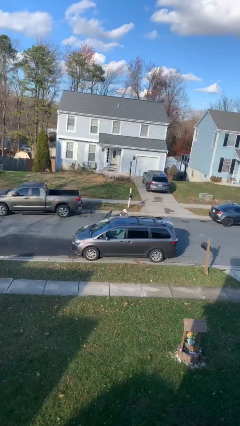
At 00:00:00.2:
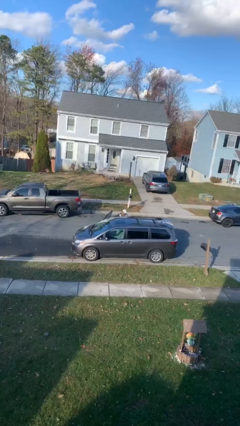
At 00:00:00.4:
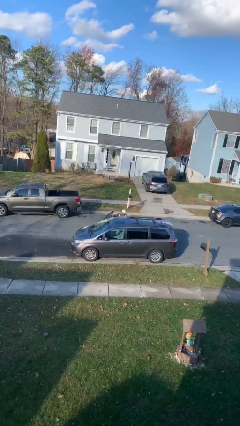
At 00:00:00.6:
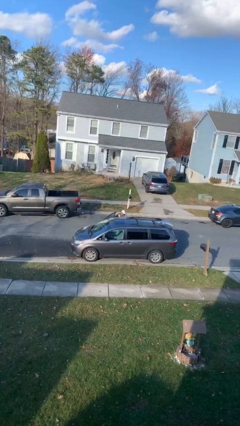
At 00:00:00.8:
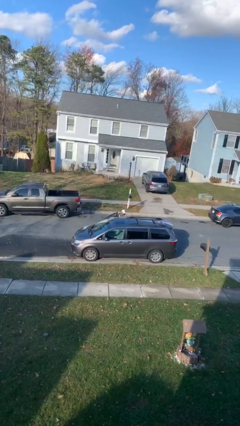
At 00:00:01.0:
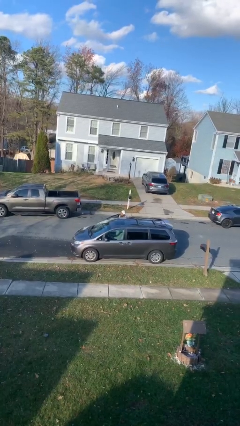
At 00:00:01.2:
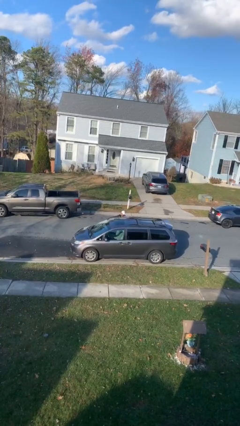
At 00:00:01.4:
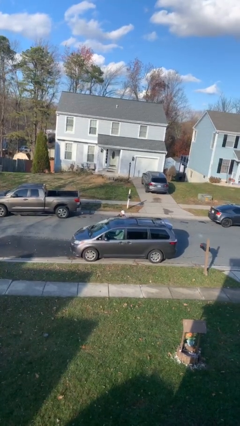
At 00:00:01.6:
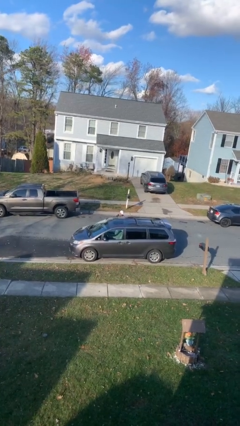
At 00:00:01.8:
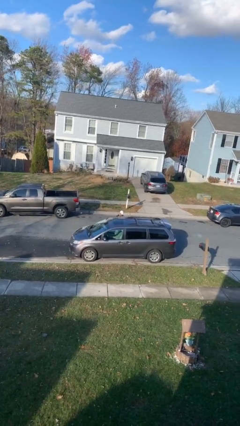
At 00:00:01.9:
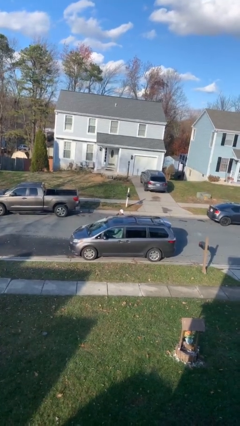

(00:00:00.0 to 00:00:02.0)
person closes car door

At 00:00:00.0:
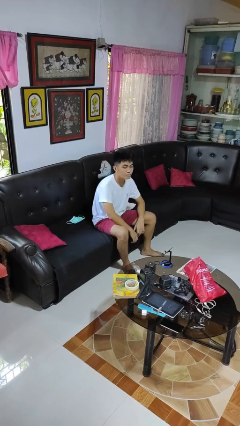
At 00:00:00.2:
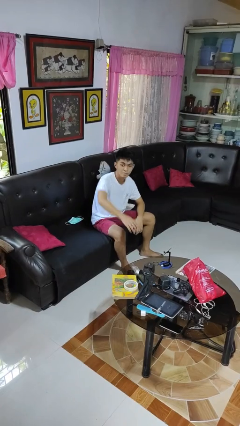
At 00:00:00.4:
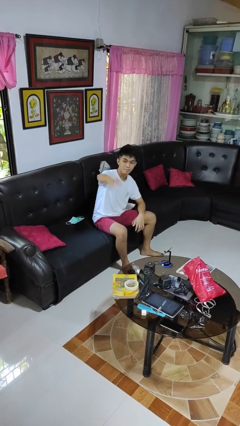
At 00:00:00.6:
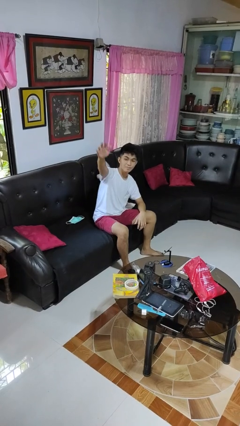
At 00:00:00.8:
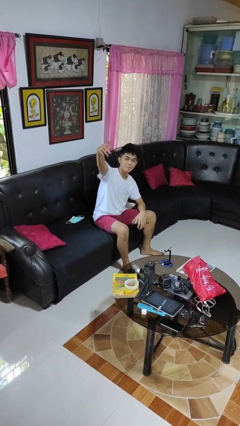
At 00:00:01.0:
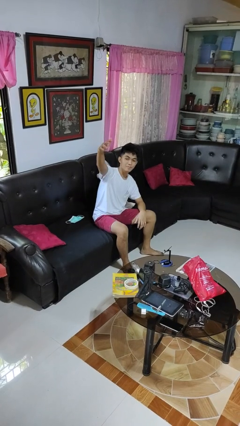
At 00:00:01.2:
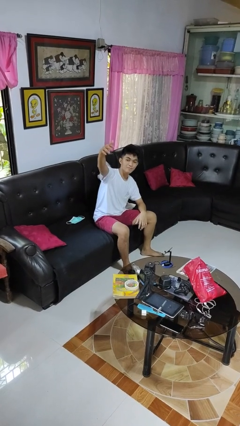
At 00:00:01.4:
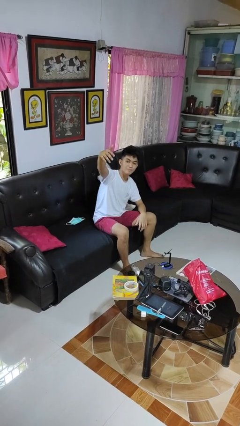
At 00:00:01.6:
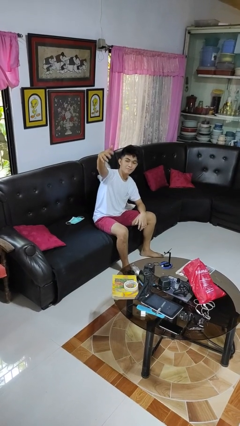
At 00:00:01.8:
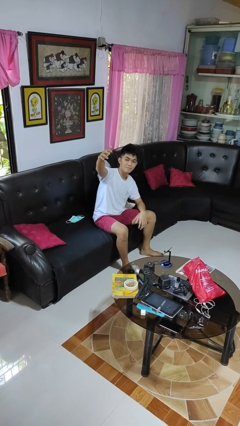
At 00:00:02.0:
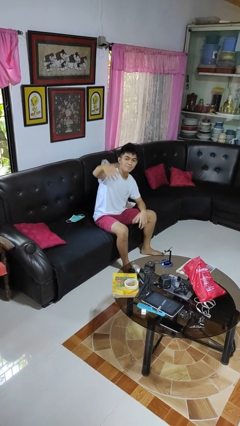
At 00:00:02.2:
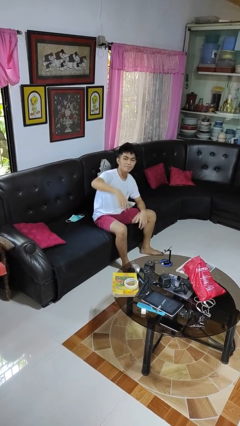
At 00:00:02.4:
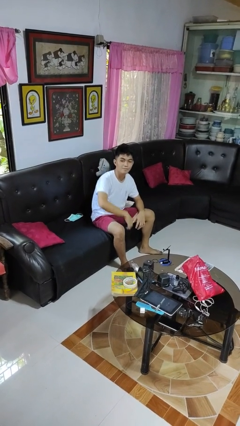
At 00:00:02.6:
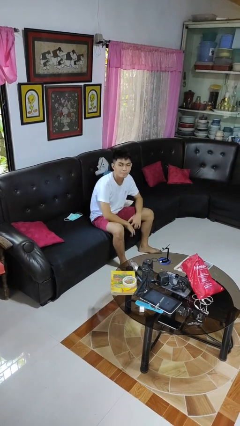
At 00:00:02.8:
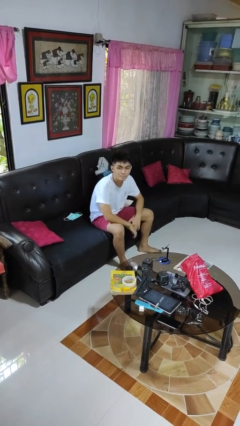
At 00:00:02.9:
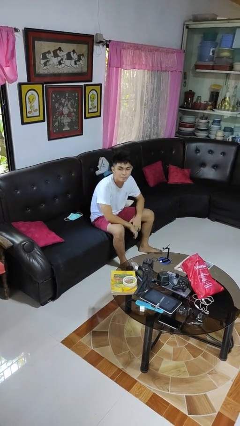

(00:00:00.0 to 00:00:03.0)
person gestures come here

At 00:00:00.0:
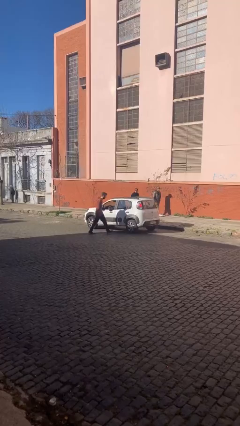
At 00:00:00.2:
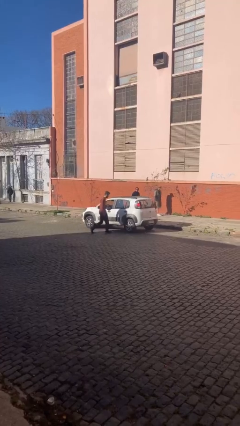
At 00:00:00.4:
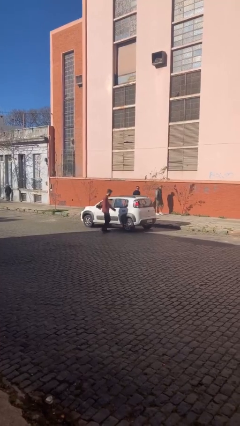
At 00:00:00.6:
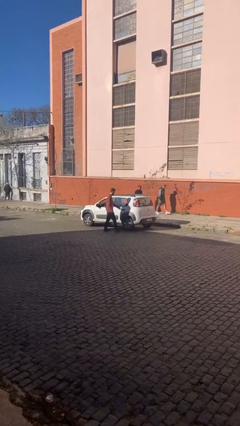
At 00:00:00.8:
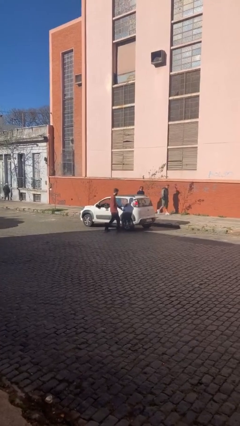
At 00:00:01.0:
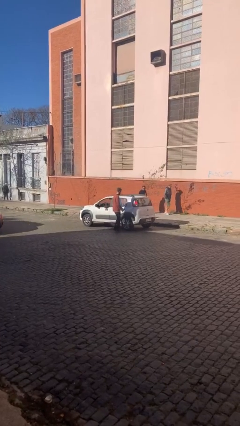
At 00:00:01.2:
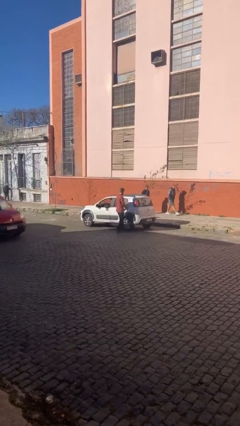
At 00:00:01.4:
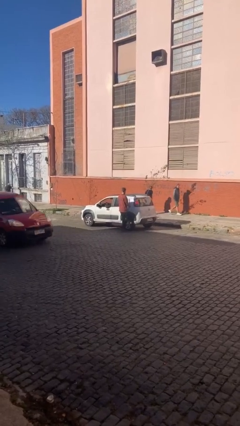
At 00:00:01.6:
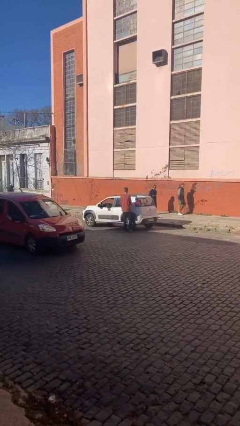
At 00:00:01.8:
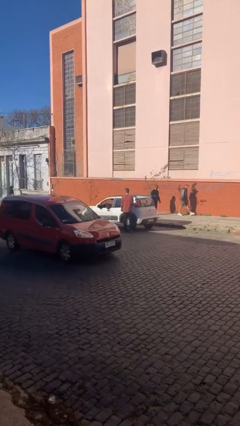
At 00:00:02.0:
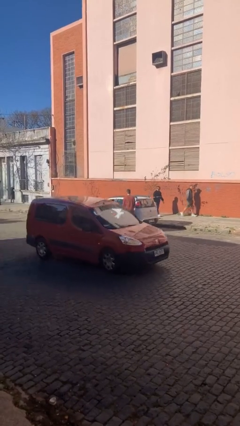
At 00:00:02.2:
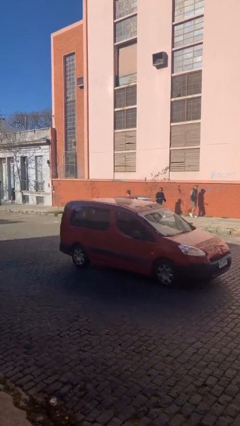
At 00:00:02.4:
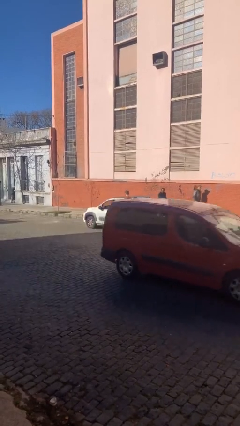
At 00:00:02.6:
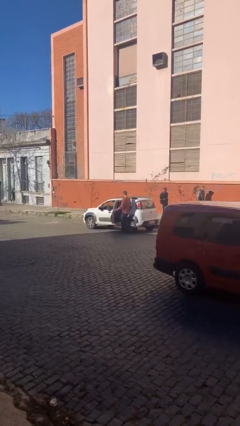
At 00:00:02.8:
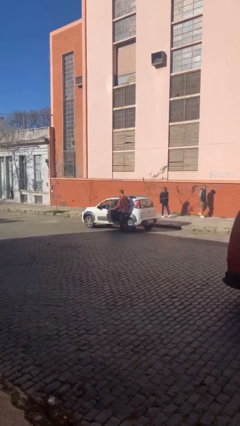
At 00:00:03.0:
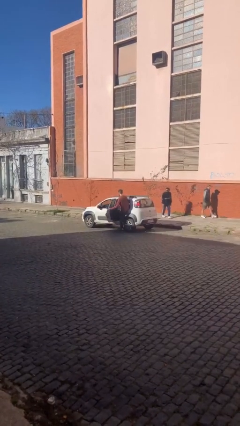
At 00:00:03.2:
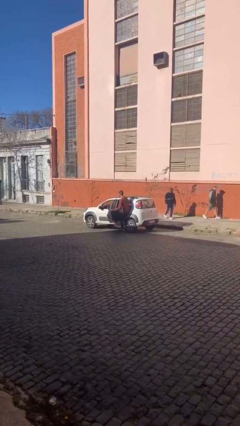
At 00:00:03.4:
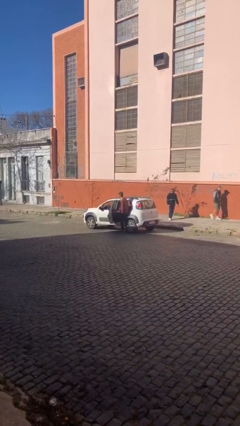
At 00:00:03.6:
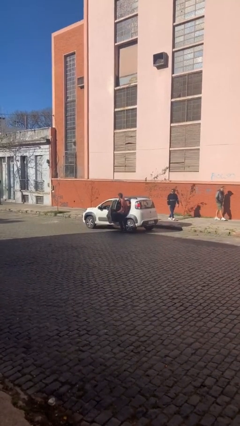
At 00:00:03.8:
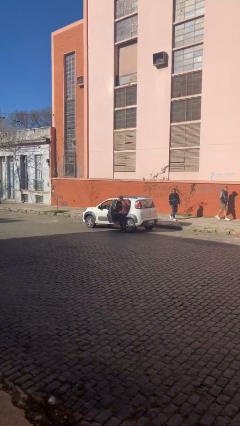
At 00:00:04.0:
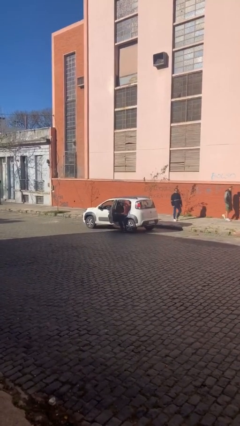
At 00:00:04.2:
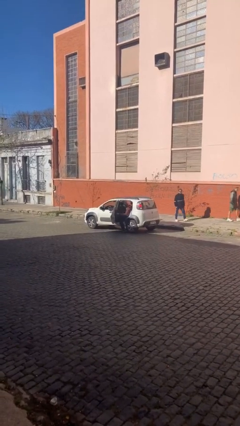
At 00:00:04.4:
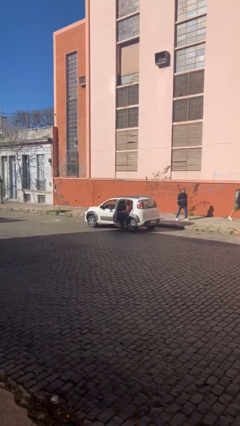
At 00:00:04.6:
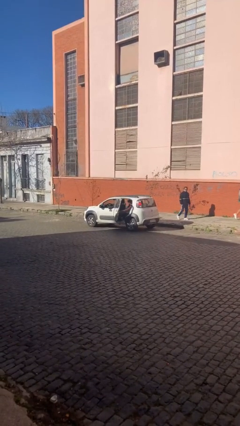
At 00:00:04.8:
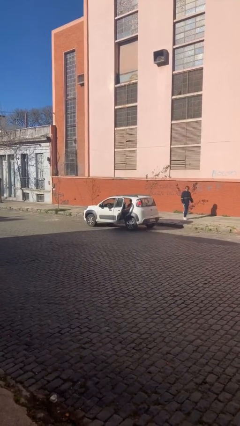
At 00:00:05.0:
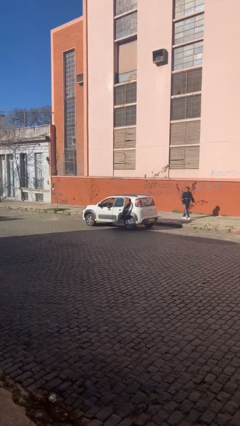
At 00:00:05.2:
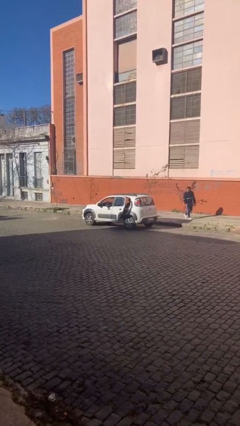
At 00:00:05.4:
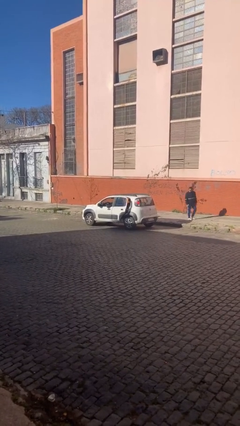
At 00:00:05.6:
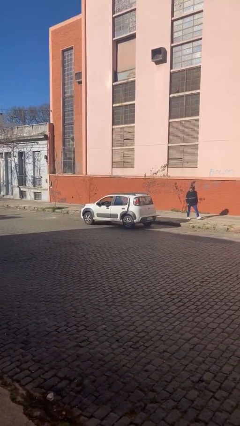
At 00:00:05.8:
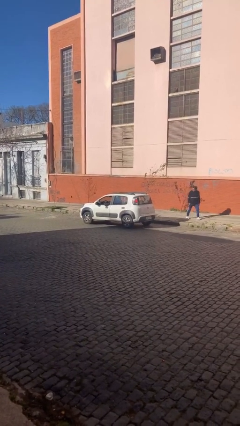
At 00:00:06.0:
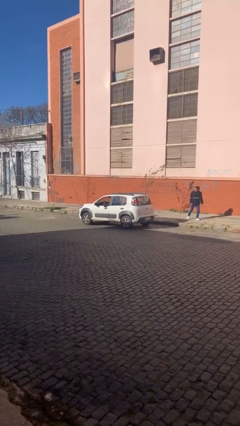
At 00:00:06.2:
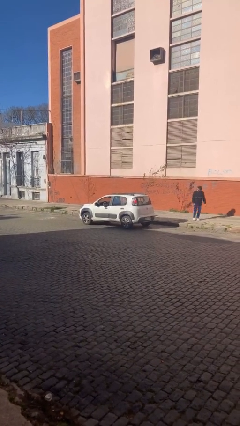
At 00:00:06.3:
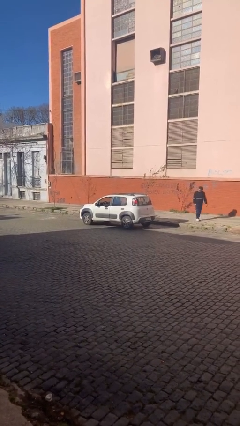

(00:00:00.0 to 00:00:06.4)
car picks up person

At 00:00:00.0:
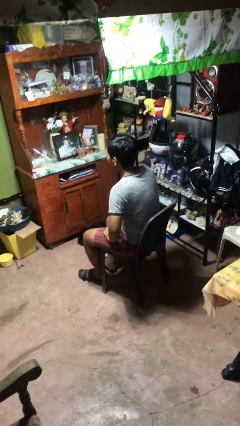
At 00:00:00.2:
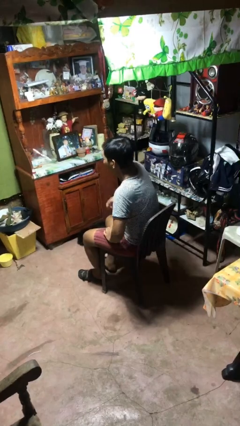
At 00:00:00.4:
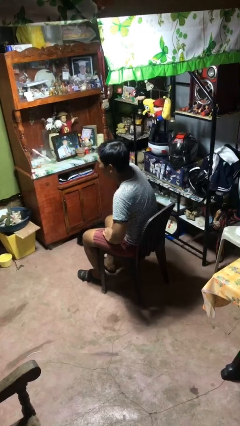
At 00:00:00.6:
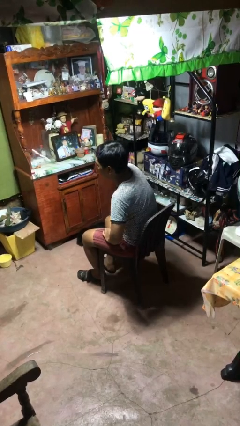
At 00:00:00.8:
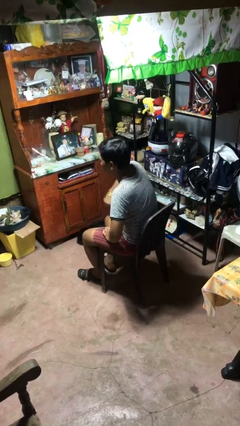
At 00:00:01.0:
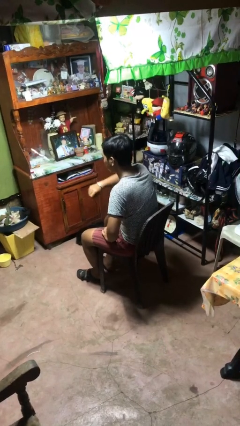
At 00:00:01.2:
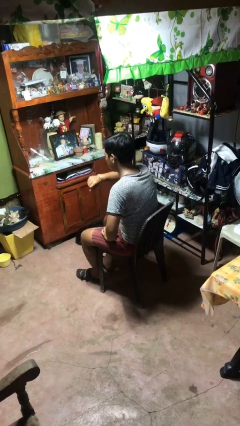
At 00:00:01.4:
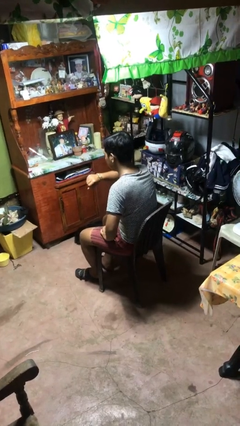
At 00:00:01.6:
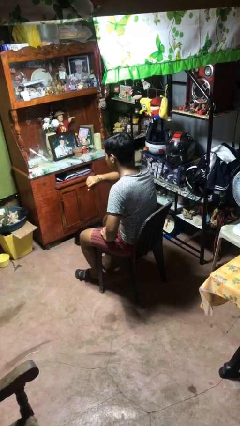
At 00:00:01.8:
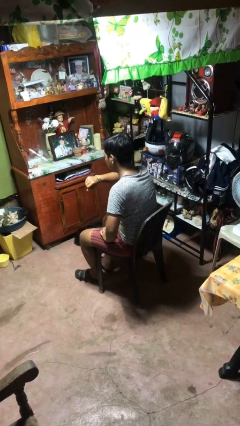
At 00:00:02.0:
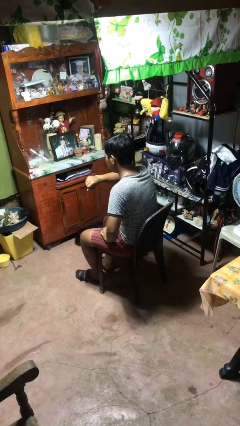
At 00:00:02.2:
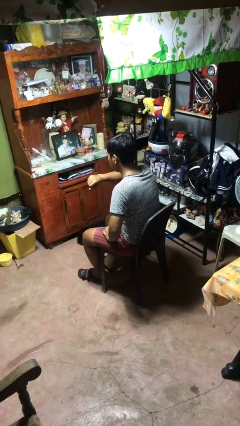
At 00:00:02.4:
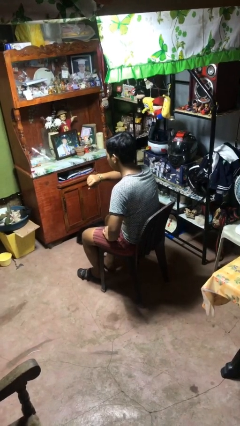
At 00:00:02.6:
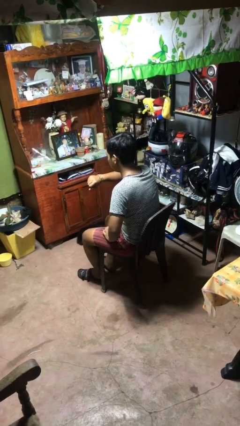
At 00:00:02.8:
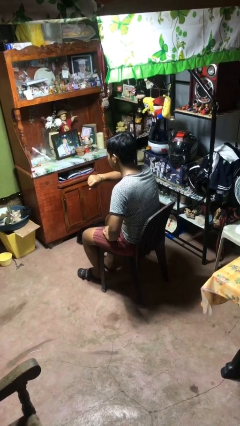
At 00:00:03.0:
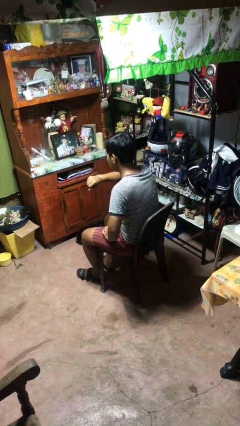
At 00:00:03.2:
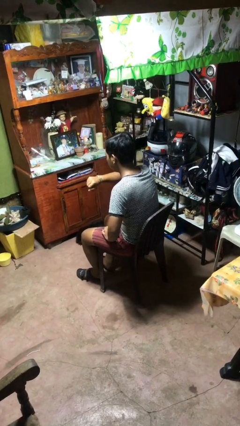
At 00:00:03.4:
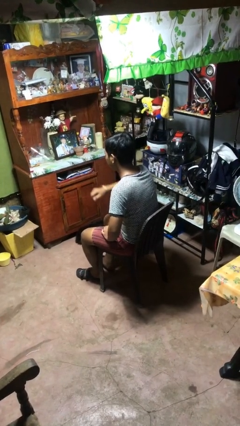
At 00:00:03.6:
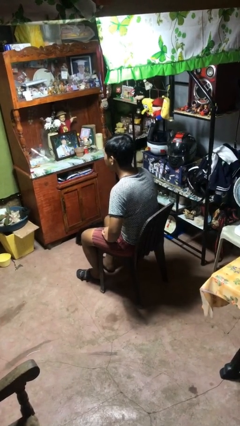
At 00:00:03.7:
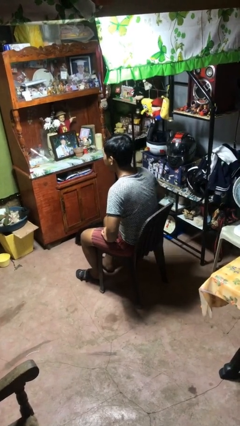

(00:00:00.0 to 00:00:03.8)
person looks at wristwatch

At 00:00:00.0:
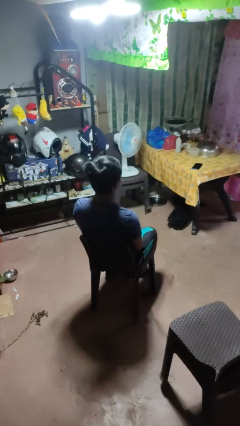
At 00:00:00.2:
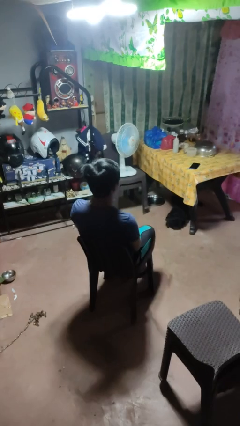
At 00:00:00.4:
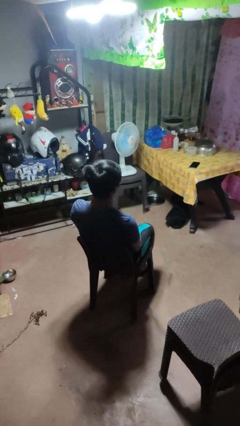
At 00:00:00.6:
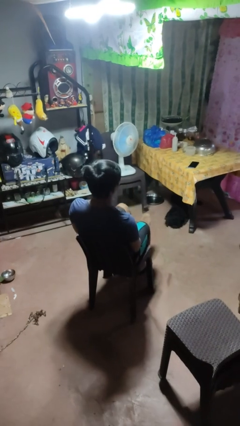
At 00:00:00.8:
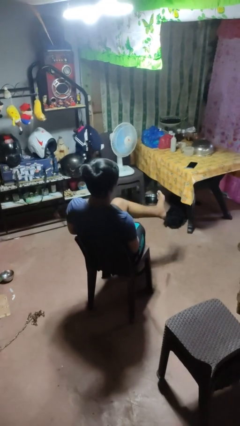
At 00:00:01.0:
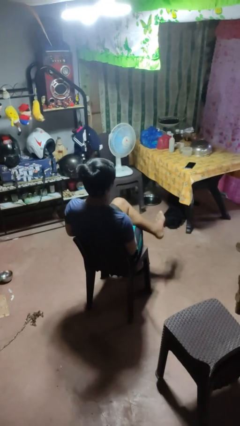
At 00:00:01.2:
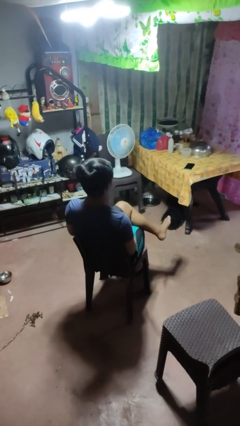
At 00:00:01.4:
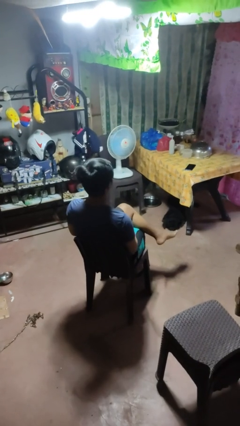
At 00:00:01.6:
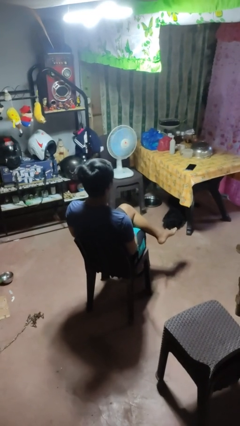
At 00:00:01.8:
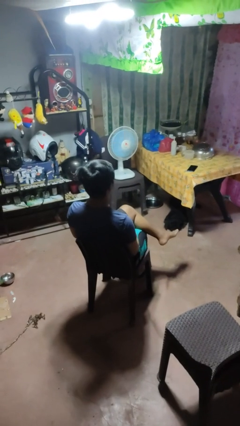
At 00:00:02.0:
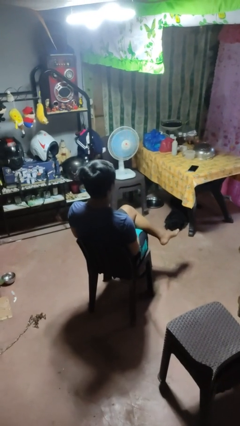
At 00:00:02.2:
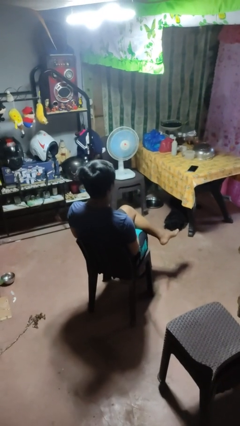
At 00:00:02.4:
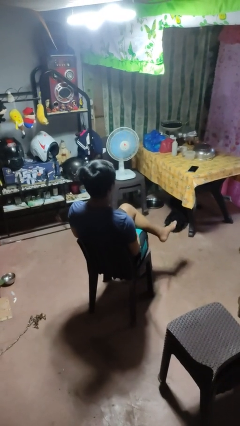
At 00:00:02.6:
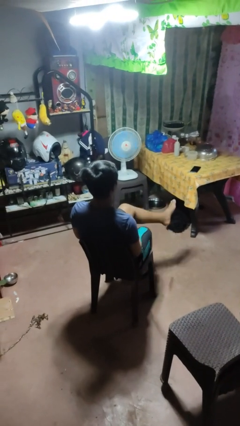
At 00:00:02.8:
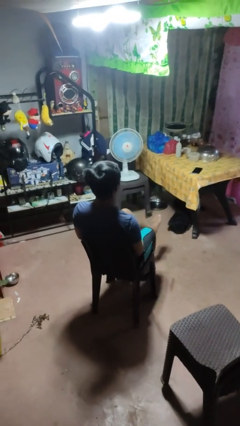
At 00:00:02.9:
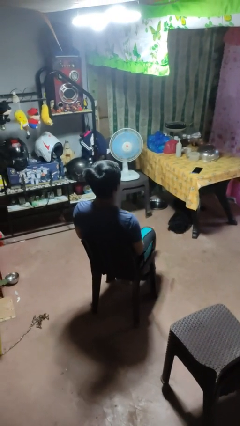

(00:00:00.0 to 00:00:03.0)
person crosses legs
